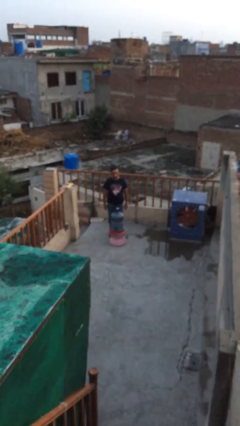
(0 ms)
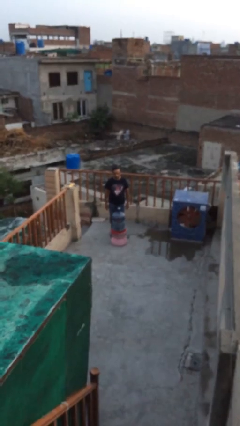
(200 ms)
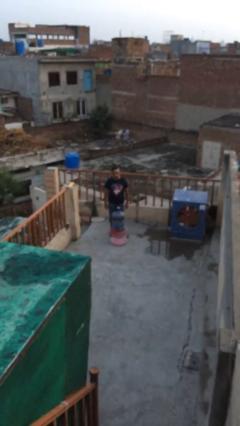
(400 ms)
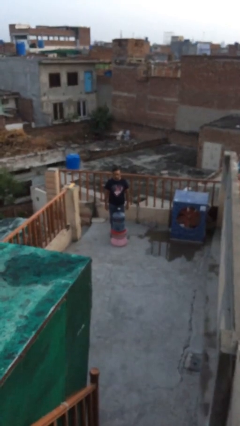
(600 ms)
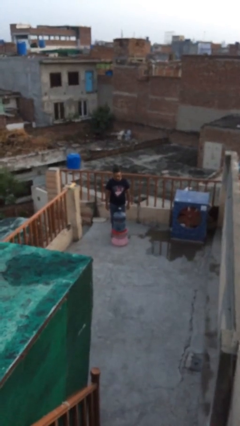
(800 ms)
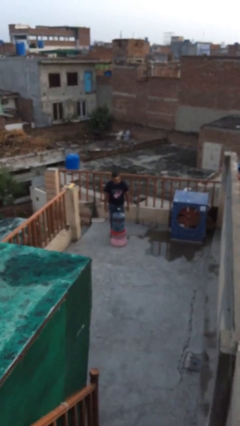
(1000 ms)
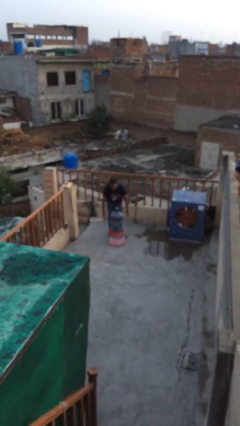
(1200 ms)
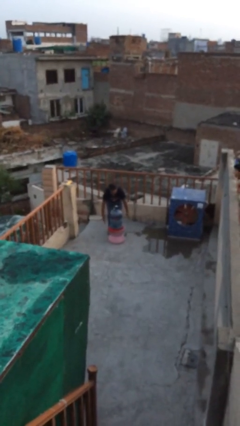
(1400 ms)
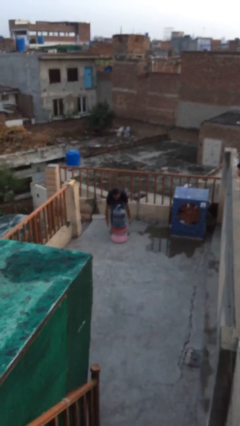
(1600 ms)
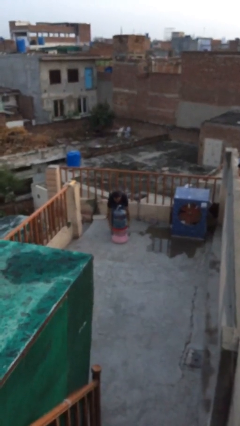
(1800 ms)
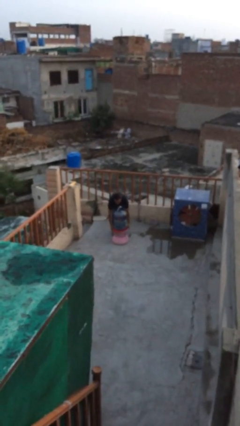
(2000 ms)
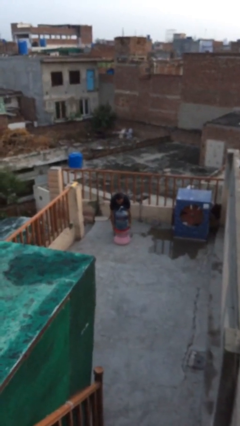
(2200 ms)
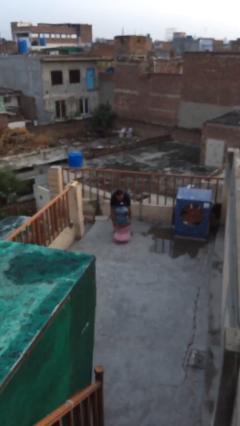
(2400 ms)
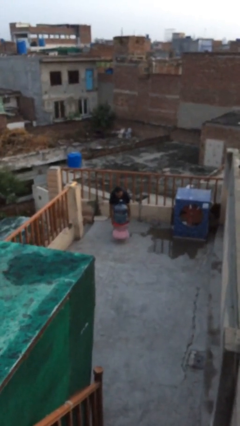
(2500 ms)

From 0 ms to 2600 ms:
person picks up object from floor

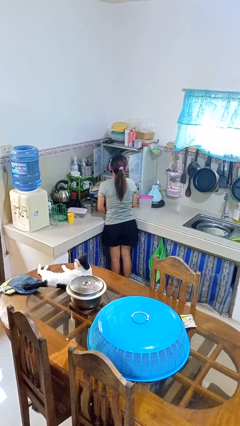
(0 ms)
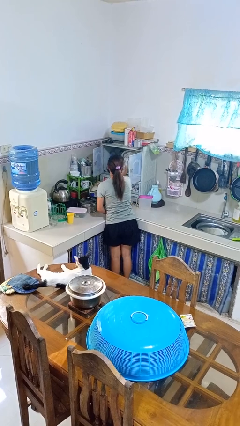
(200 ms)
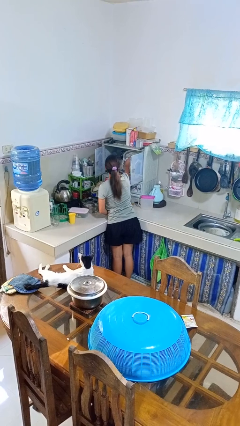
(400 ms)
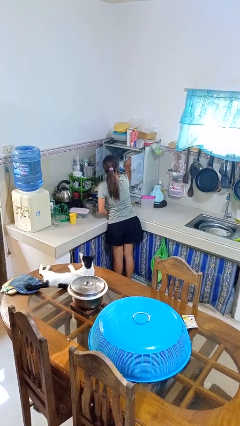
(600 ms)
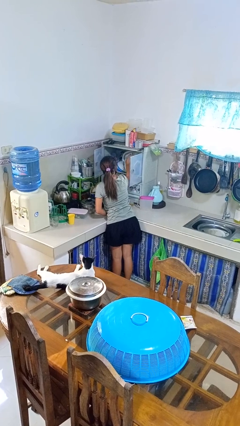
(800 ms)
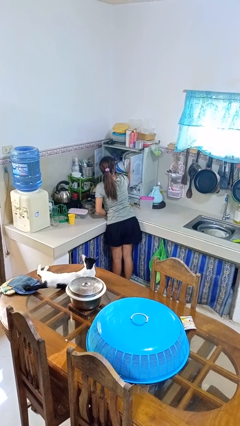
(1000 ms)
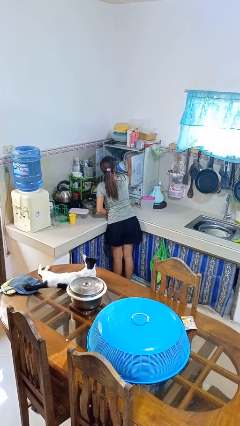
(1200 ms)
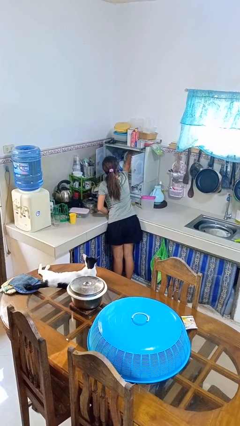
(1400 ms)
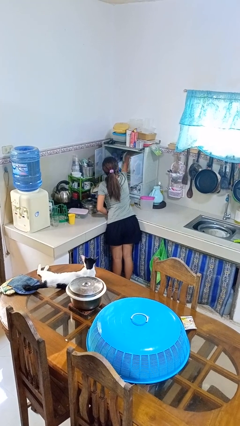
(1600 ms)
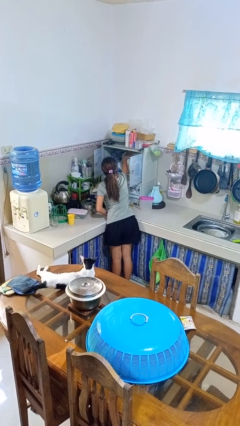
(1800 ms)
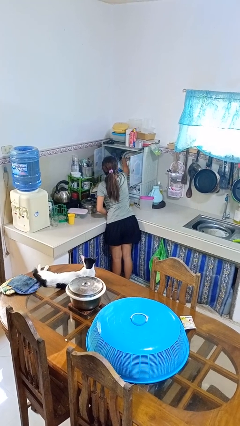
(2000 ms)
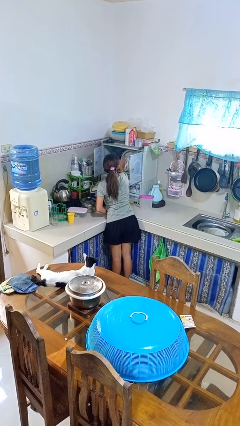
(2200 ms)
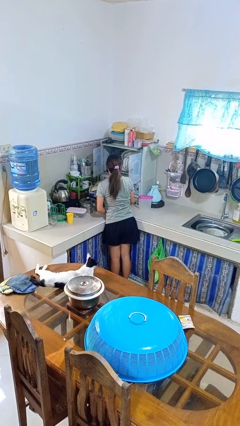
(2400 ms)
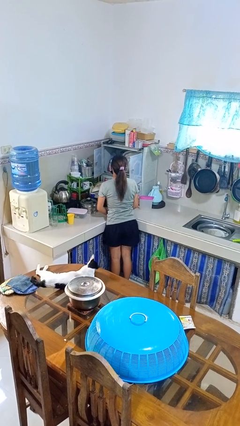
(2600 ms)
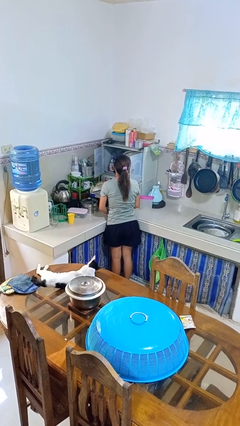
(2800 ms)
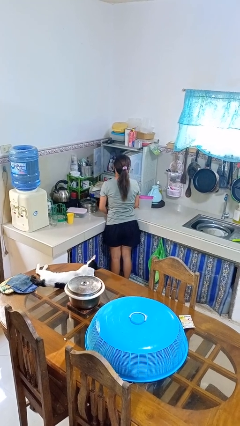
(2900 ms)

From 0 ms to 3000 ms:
person searches in kitchen drawer

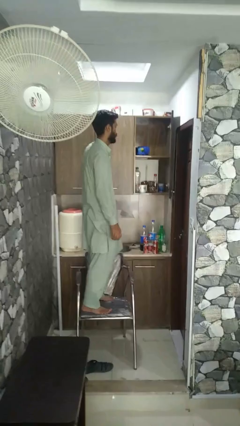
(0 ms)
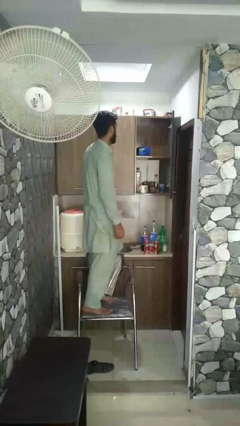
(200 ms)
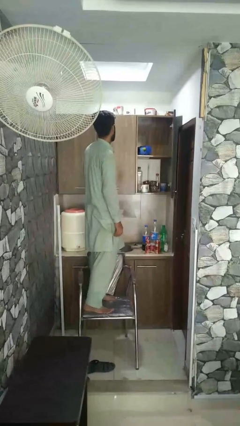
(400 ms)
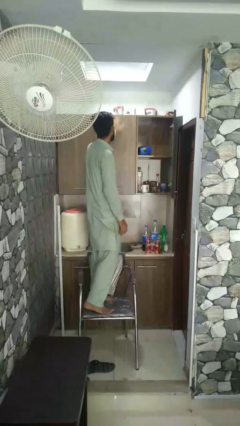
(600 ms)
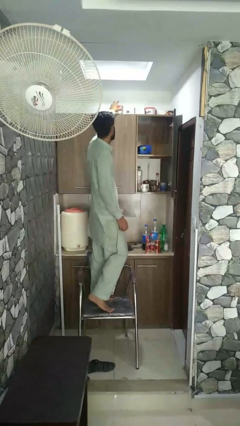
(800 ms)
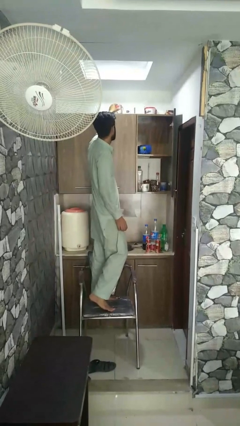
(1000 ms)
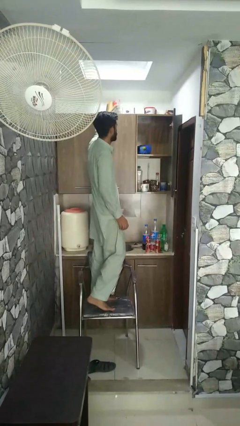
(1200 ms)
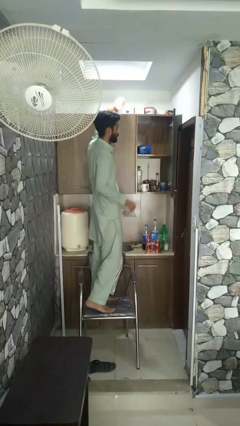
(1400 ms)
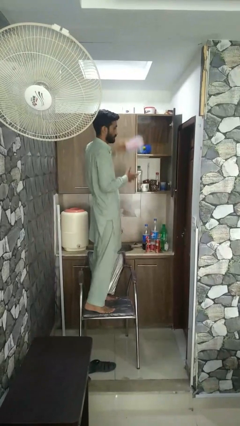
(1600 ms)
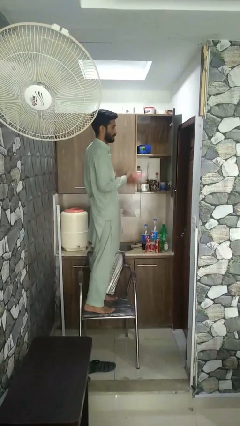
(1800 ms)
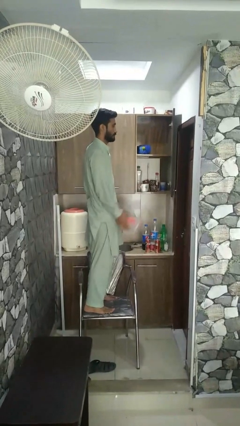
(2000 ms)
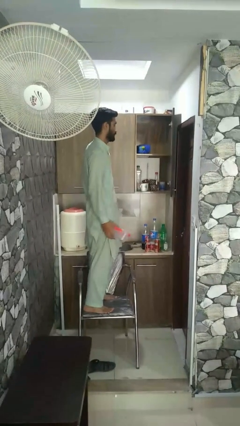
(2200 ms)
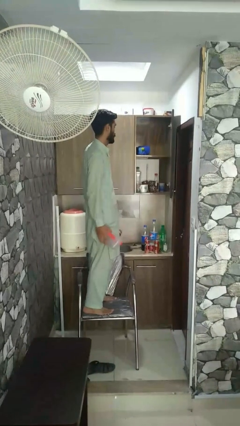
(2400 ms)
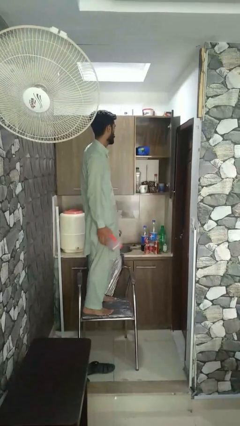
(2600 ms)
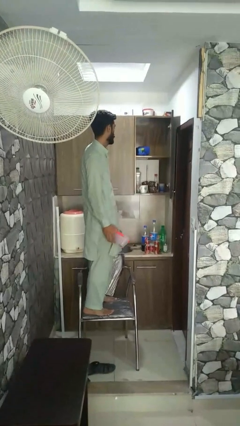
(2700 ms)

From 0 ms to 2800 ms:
person picks up object from shelf

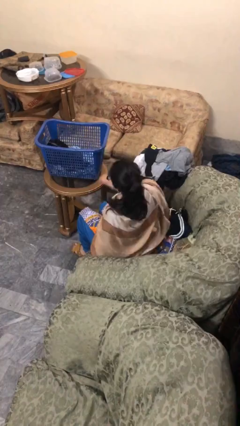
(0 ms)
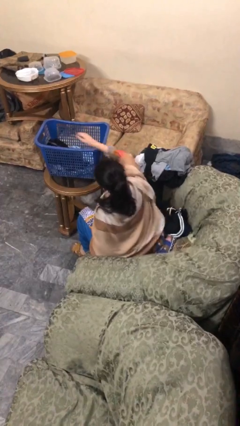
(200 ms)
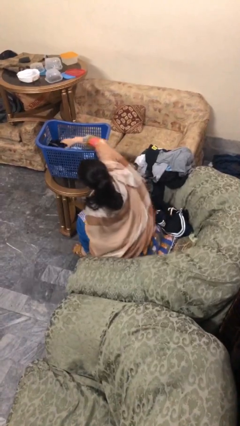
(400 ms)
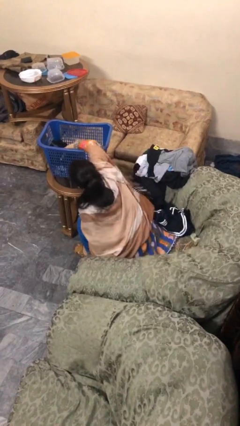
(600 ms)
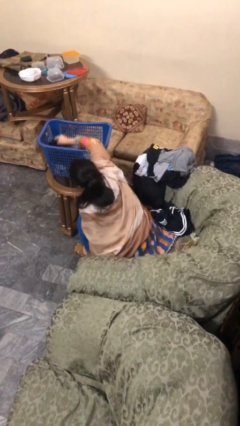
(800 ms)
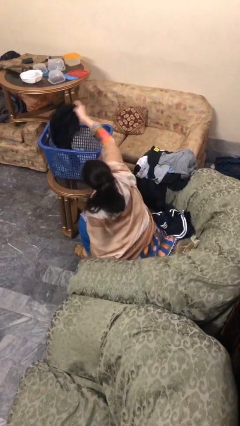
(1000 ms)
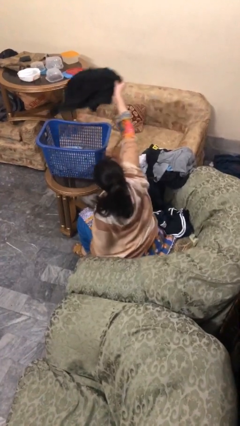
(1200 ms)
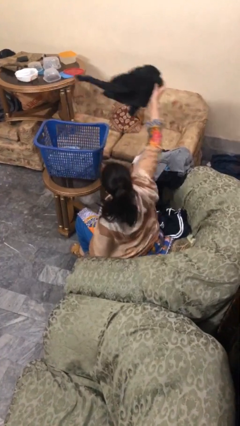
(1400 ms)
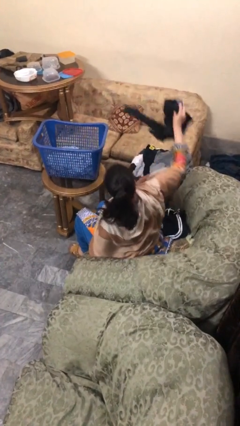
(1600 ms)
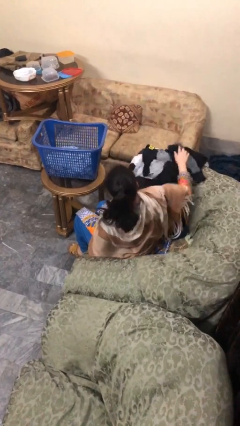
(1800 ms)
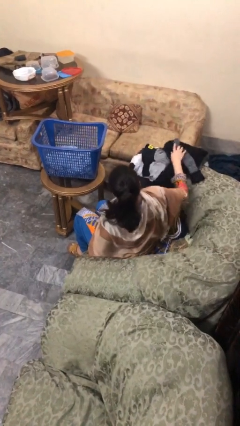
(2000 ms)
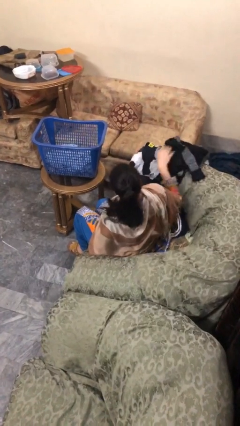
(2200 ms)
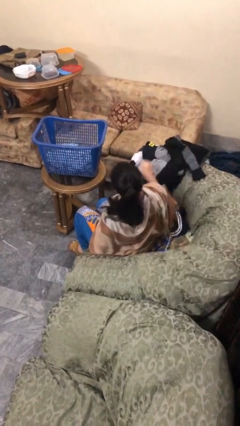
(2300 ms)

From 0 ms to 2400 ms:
person takes object from basket

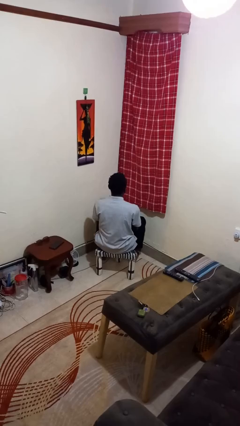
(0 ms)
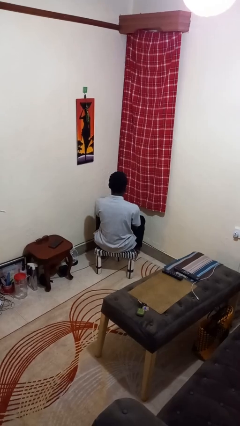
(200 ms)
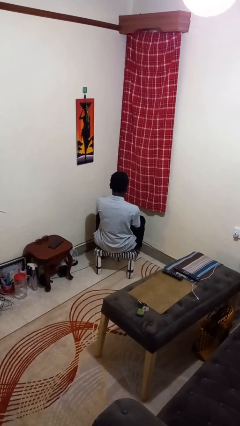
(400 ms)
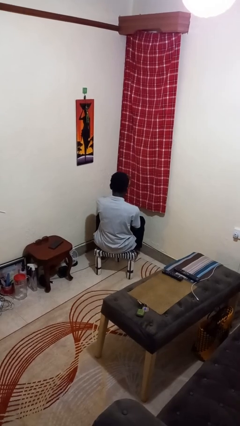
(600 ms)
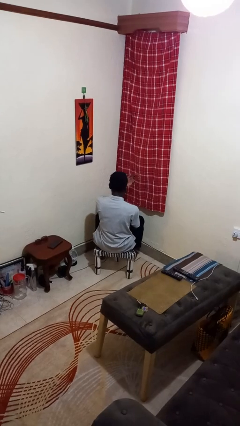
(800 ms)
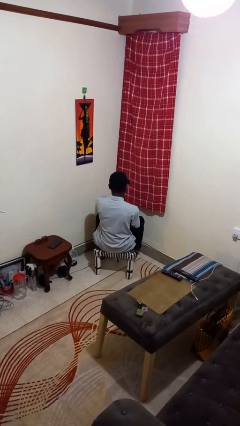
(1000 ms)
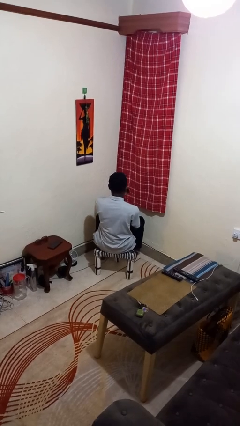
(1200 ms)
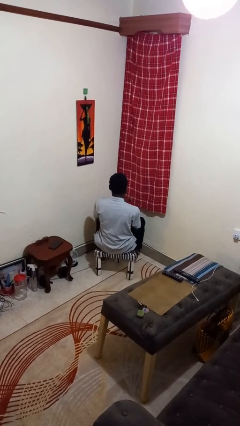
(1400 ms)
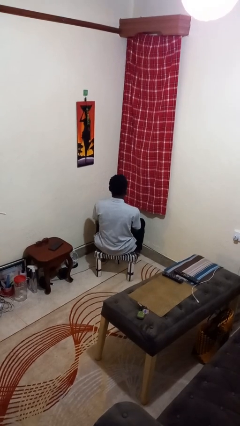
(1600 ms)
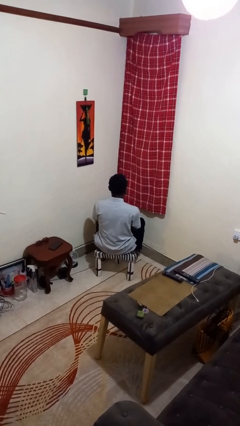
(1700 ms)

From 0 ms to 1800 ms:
person gestures swipe right

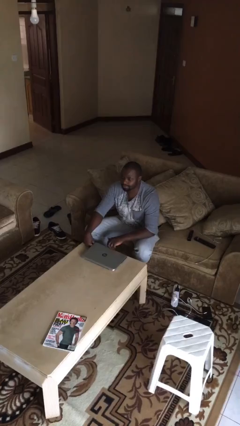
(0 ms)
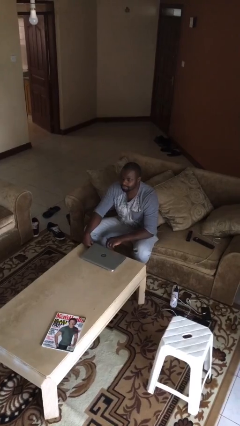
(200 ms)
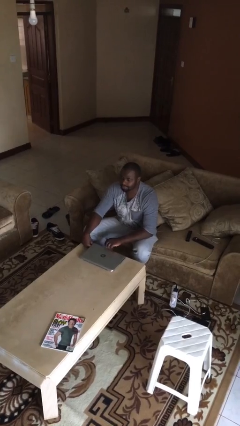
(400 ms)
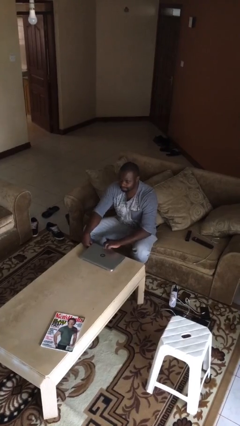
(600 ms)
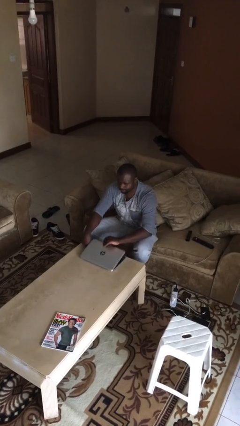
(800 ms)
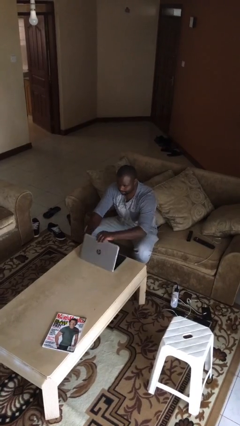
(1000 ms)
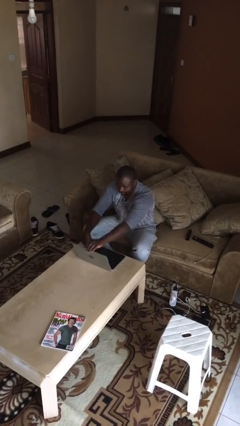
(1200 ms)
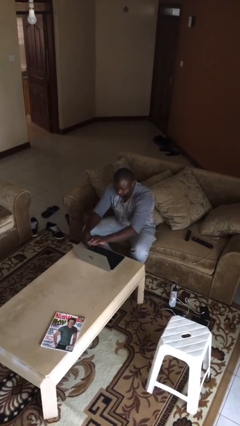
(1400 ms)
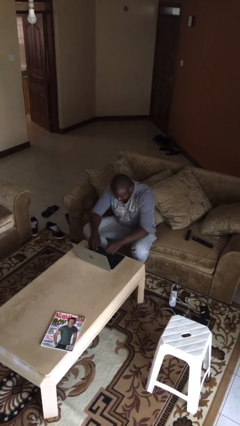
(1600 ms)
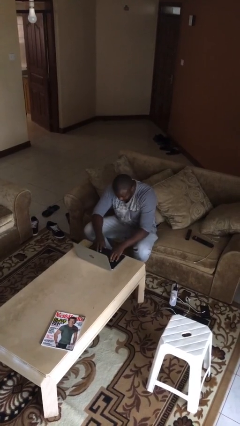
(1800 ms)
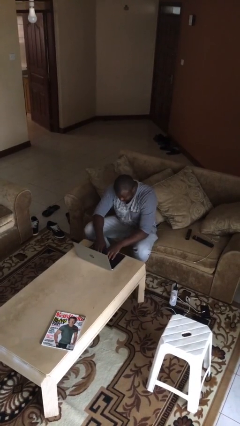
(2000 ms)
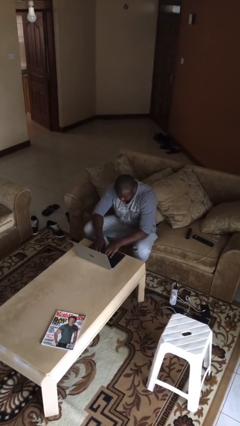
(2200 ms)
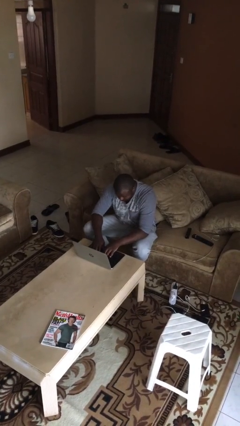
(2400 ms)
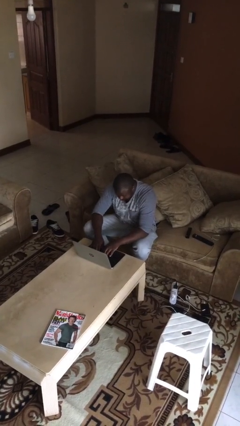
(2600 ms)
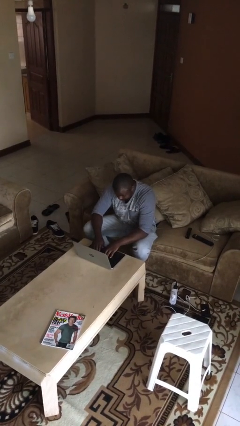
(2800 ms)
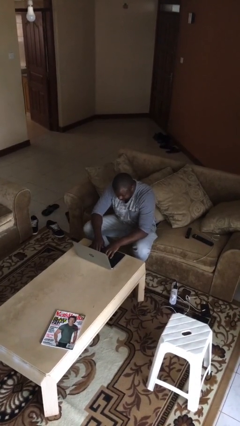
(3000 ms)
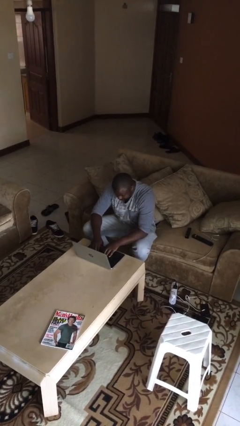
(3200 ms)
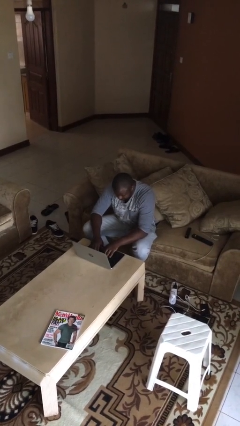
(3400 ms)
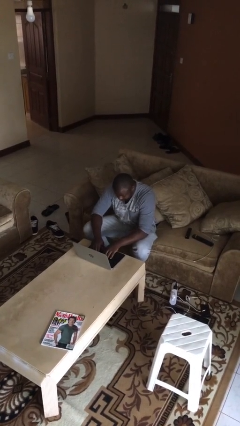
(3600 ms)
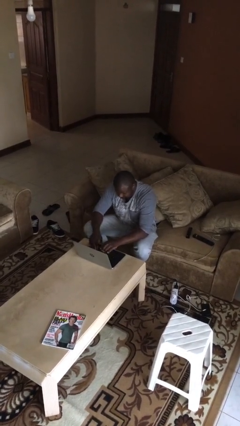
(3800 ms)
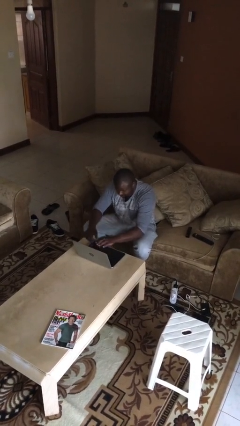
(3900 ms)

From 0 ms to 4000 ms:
person interacts with laptop

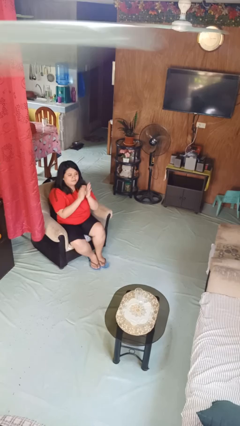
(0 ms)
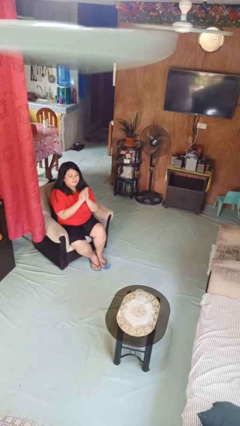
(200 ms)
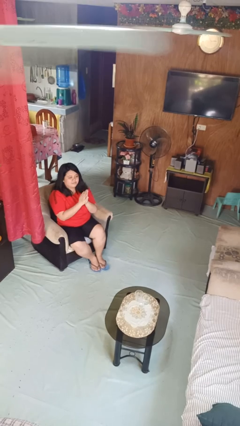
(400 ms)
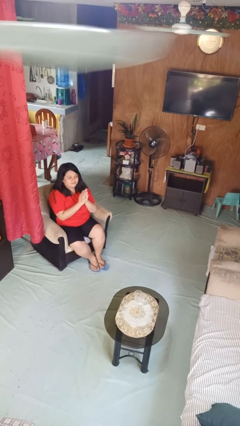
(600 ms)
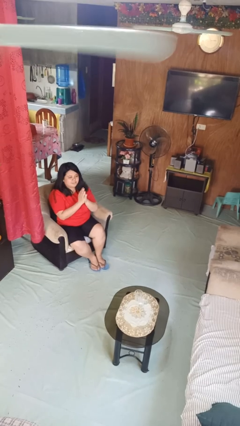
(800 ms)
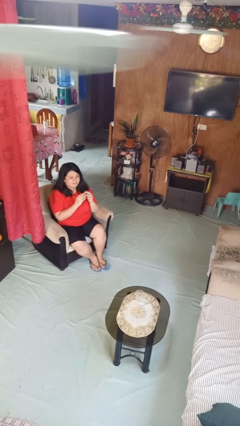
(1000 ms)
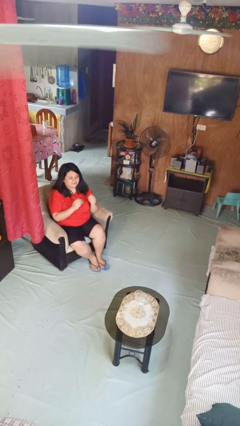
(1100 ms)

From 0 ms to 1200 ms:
person claps hands
